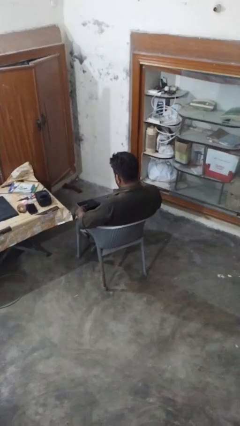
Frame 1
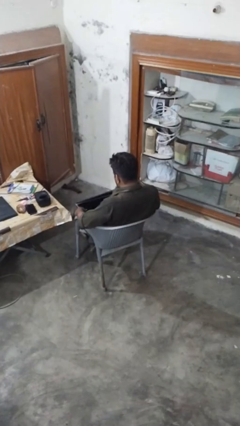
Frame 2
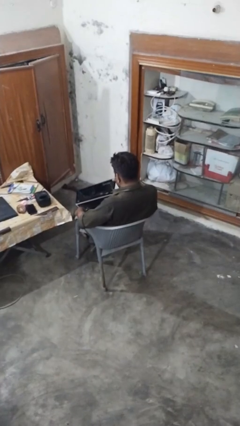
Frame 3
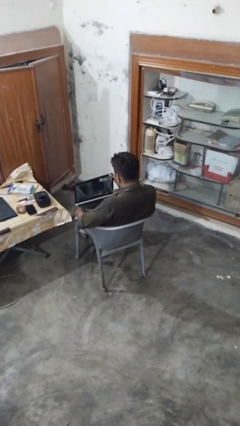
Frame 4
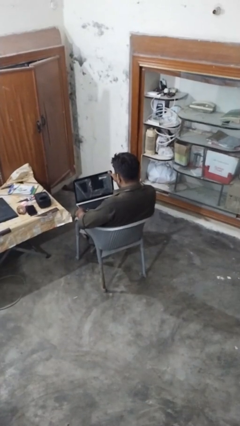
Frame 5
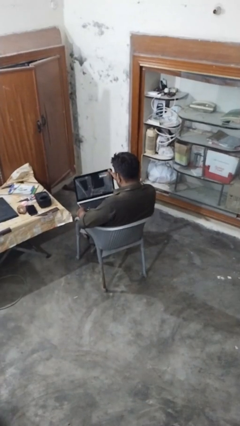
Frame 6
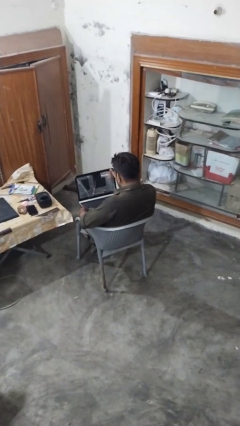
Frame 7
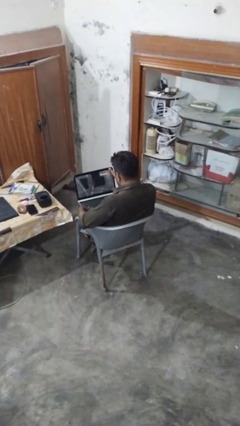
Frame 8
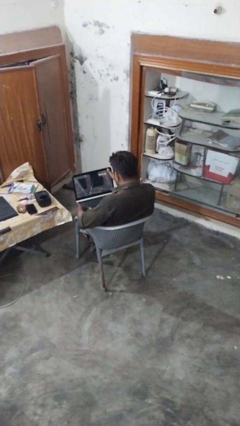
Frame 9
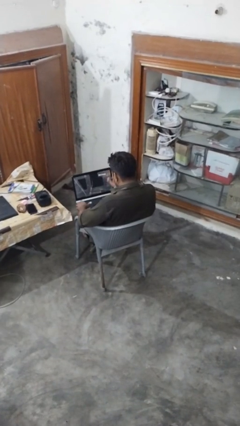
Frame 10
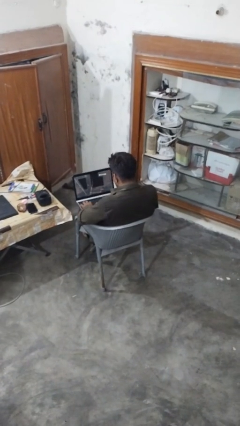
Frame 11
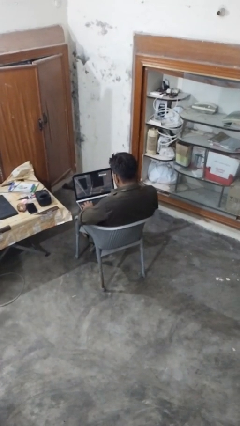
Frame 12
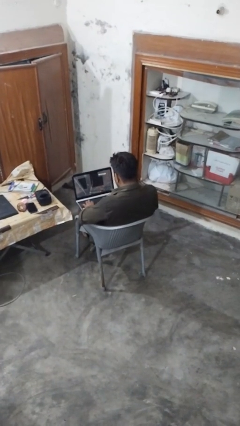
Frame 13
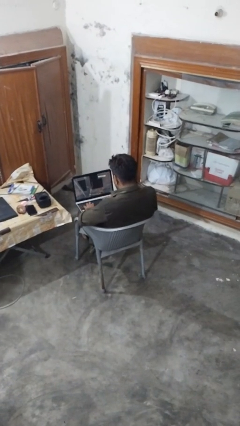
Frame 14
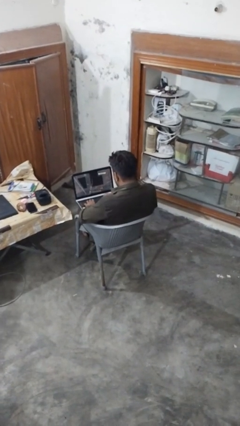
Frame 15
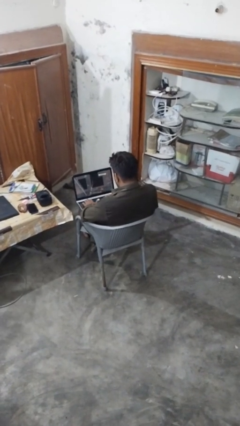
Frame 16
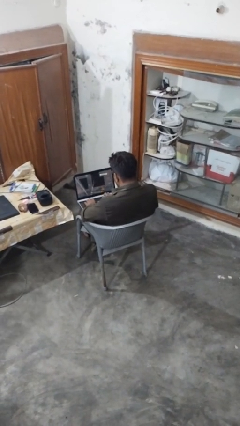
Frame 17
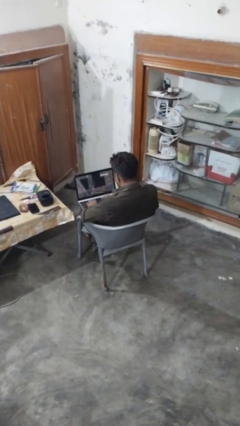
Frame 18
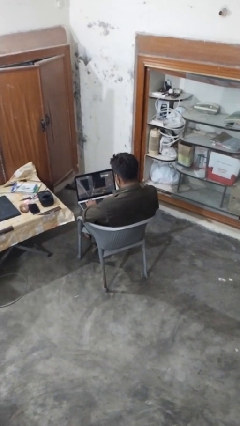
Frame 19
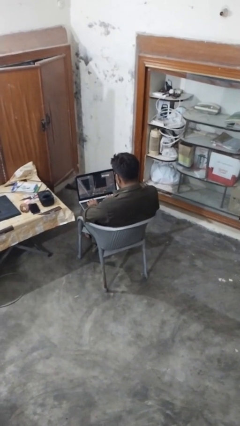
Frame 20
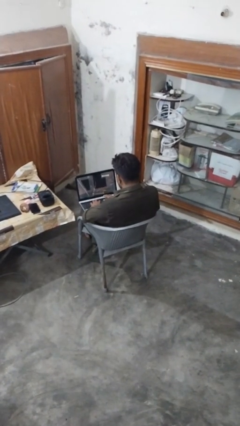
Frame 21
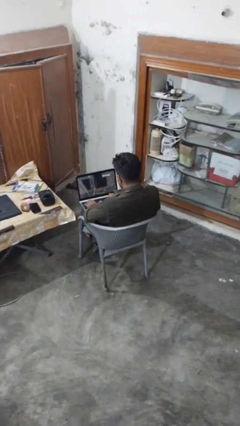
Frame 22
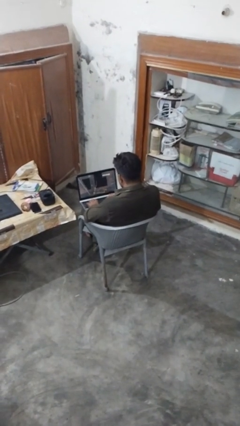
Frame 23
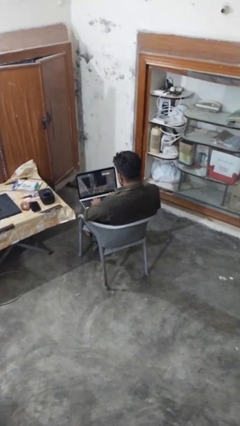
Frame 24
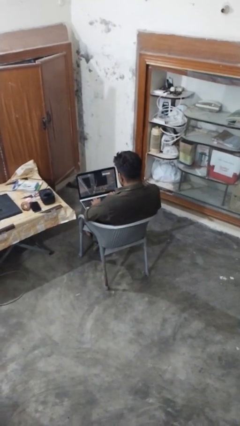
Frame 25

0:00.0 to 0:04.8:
person opens laptop

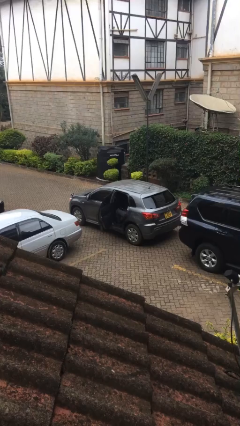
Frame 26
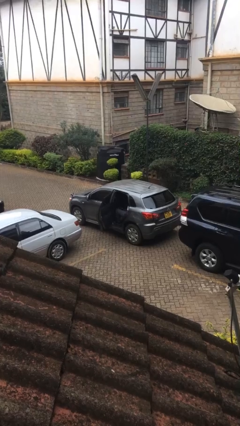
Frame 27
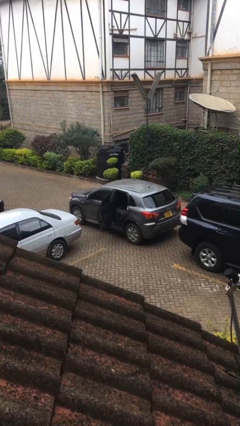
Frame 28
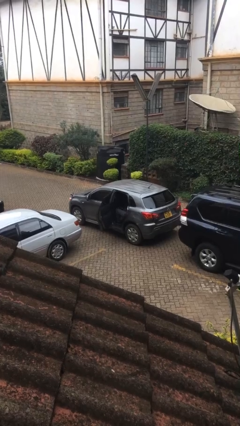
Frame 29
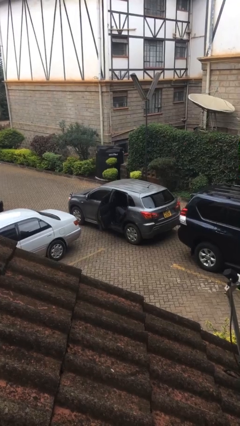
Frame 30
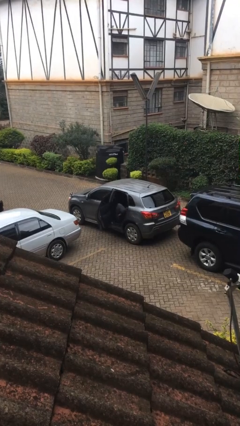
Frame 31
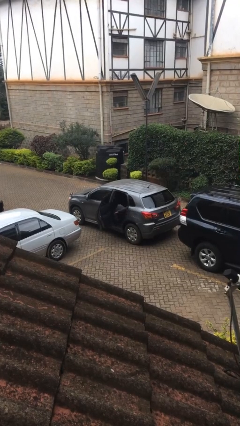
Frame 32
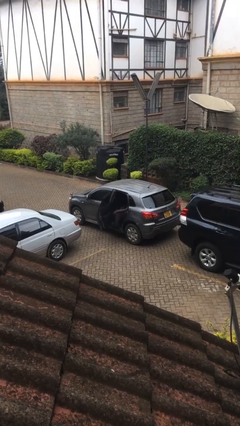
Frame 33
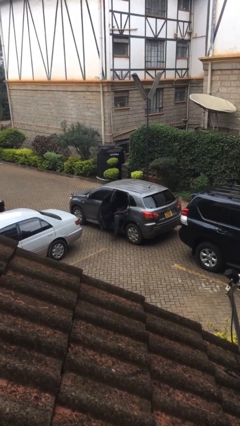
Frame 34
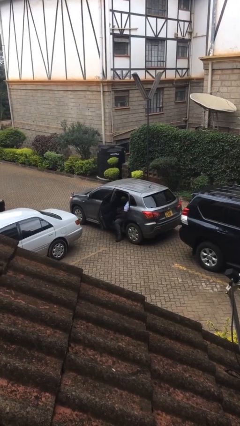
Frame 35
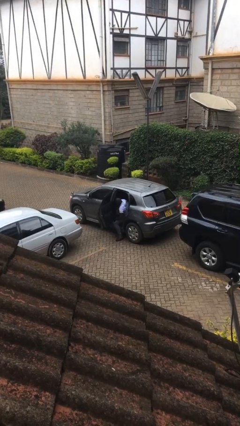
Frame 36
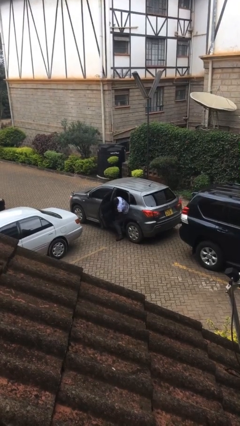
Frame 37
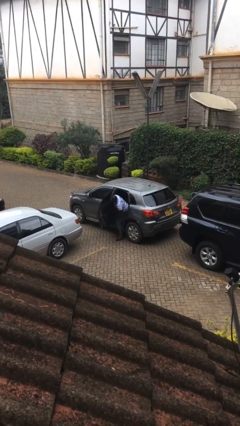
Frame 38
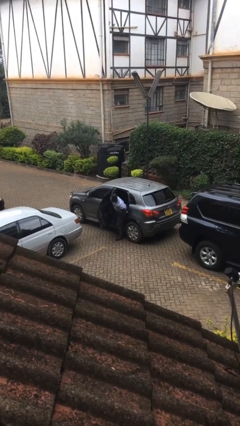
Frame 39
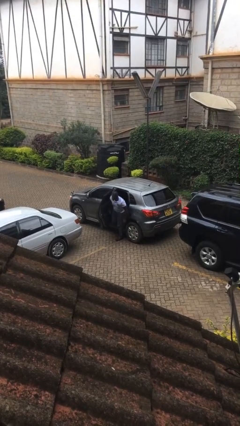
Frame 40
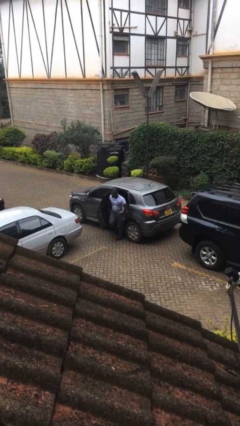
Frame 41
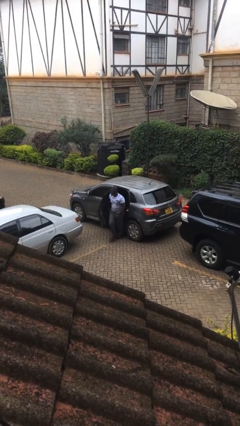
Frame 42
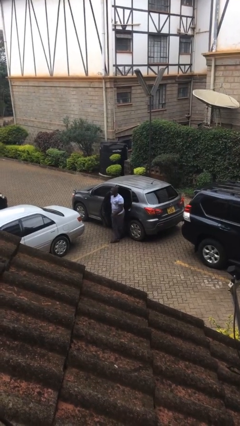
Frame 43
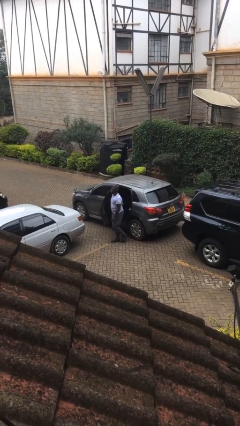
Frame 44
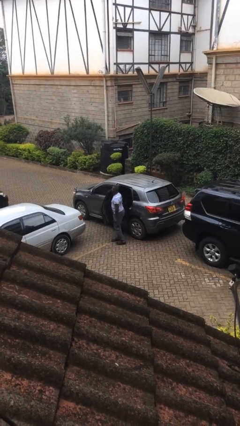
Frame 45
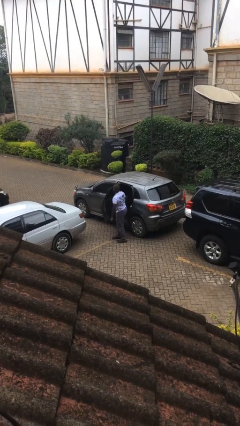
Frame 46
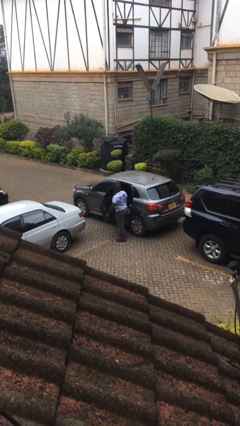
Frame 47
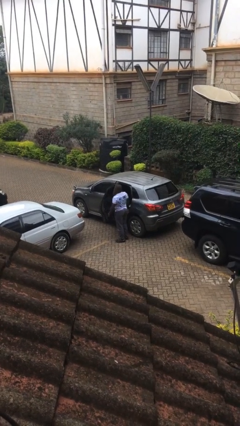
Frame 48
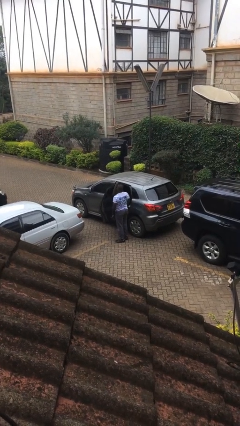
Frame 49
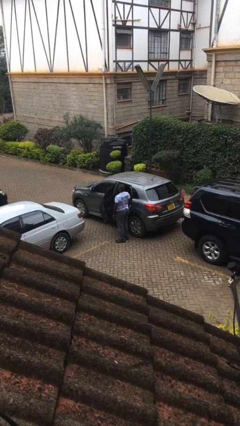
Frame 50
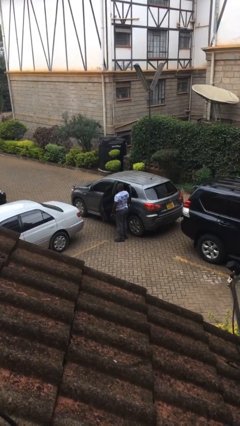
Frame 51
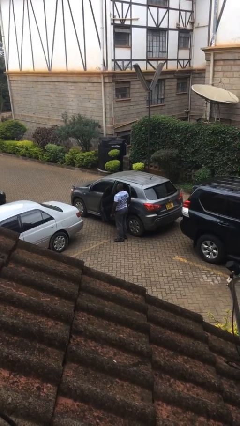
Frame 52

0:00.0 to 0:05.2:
person exits car

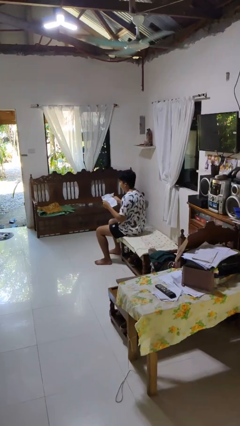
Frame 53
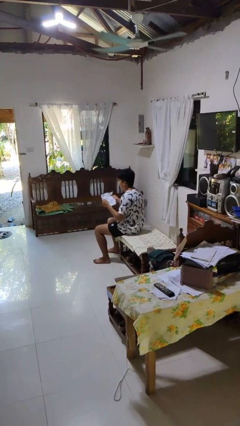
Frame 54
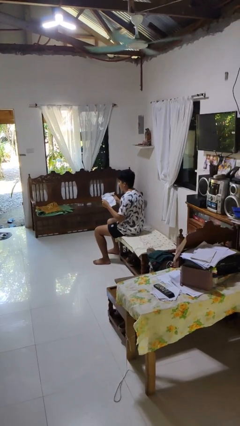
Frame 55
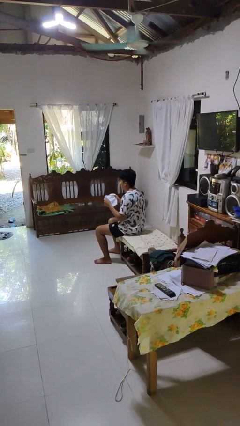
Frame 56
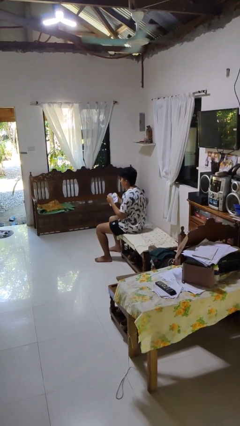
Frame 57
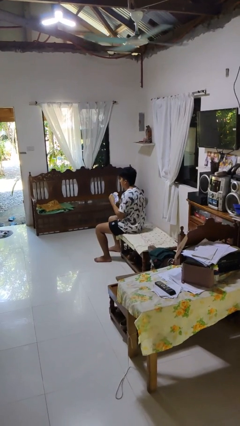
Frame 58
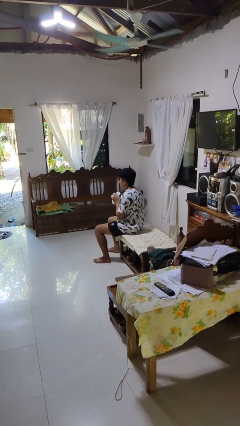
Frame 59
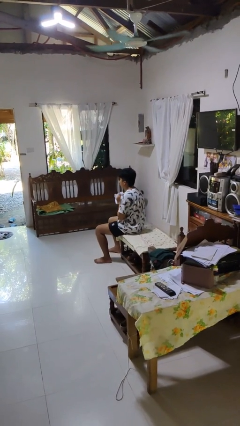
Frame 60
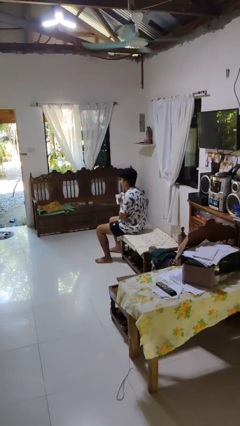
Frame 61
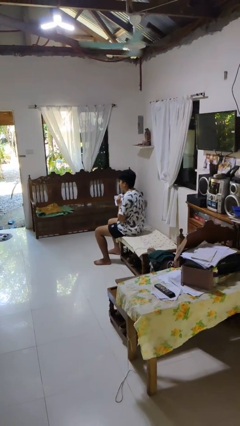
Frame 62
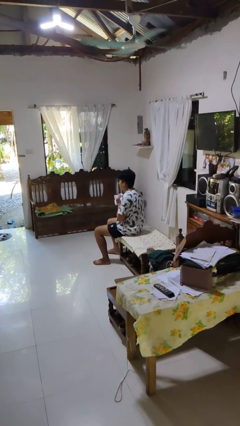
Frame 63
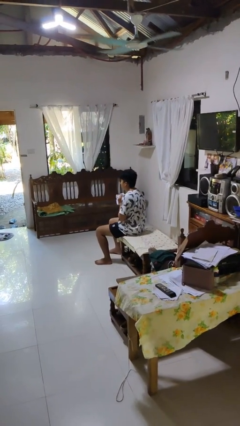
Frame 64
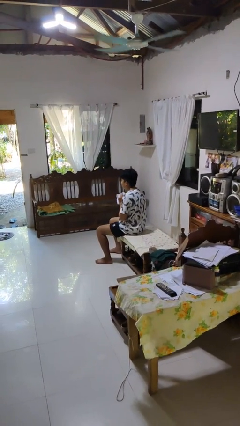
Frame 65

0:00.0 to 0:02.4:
person crumples paper

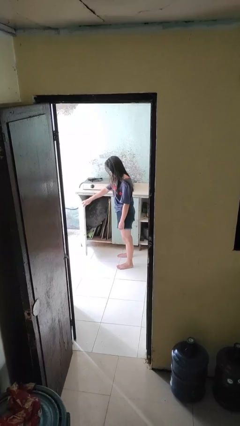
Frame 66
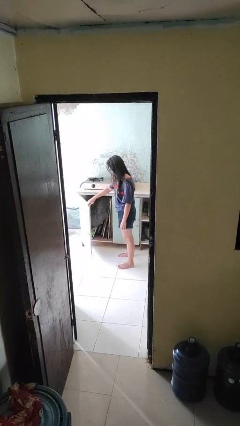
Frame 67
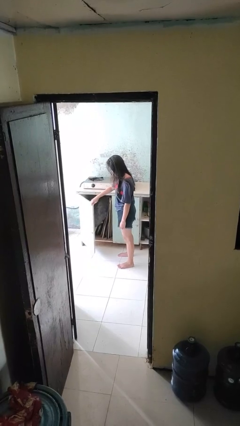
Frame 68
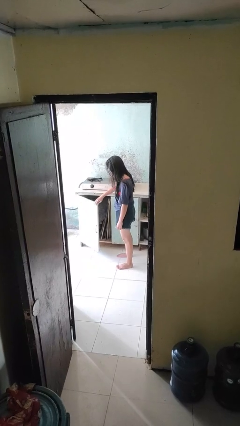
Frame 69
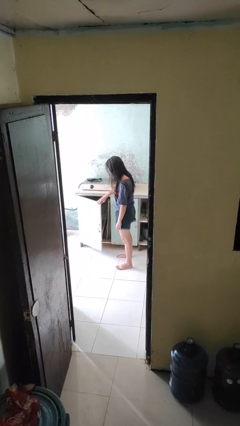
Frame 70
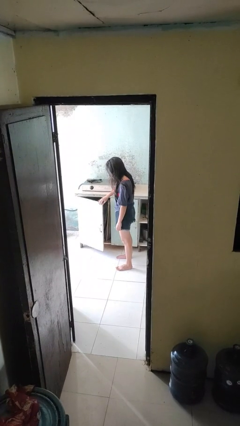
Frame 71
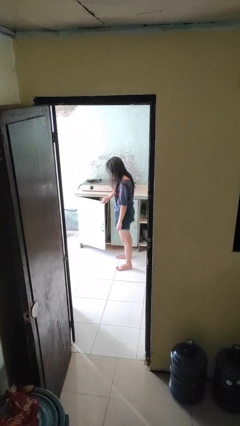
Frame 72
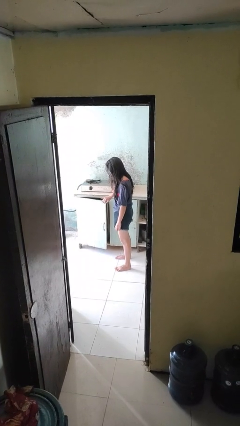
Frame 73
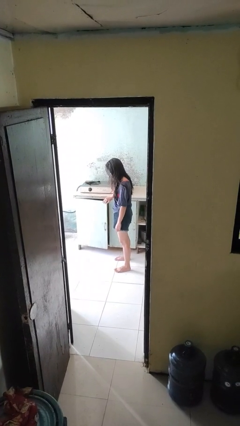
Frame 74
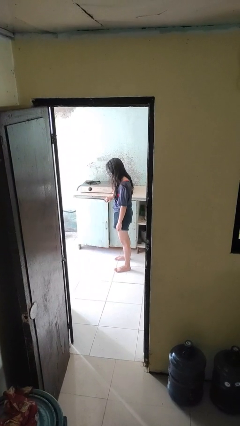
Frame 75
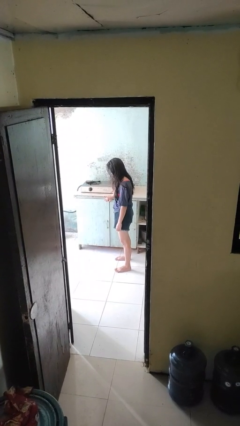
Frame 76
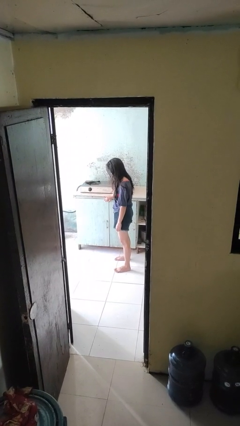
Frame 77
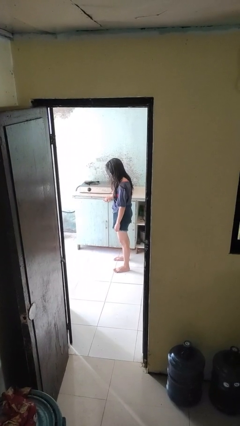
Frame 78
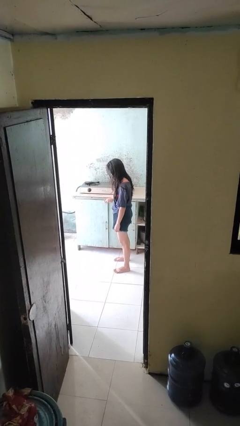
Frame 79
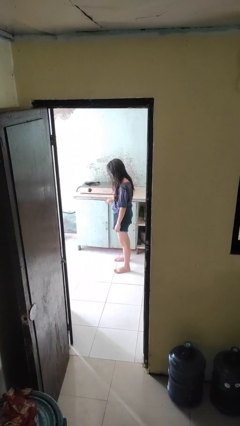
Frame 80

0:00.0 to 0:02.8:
person closes cabinet

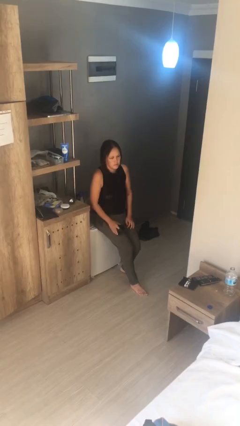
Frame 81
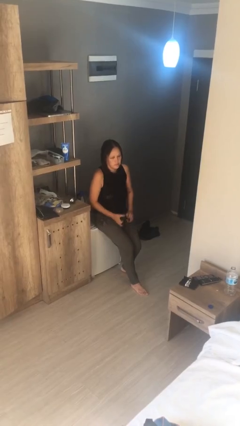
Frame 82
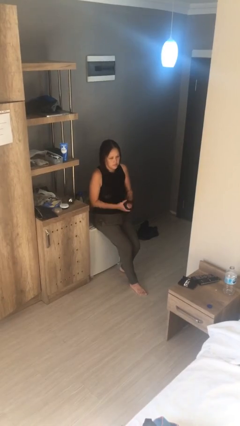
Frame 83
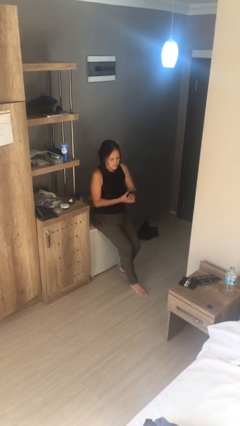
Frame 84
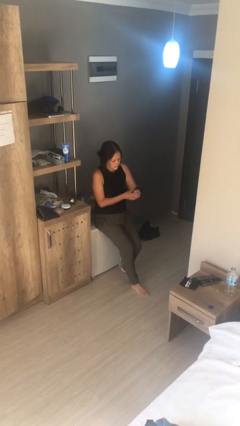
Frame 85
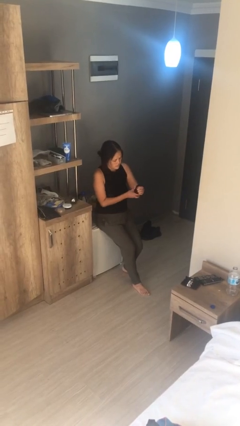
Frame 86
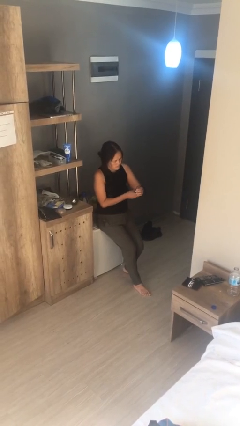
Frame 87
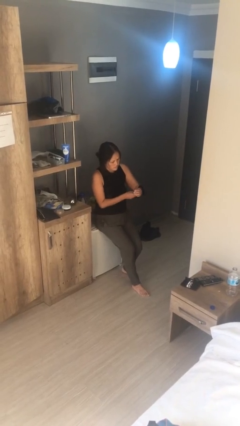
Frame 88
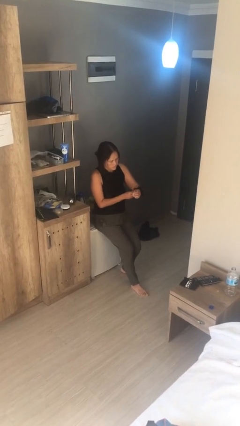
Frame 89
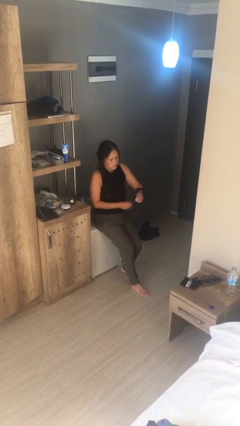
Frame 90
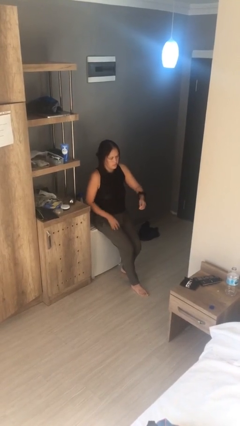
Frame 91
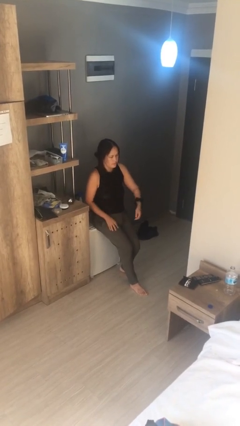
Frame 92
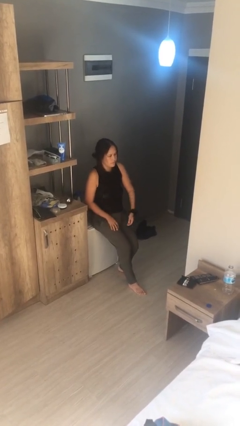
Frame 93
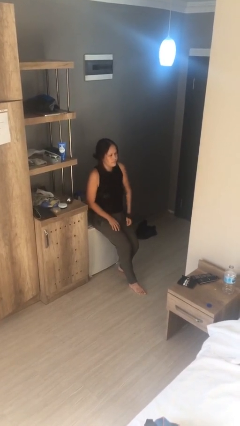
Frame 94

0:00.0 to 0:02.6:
person puts on wristwatch
